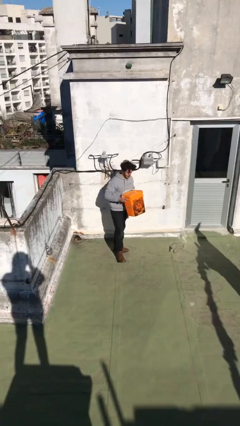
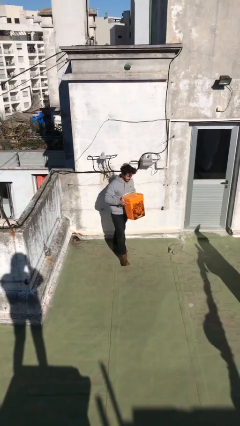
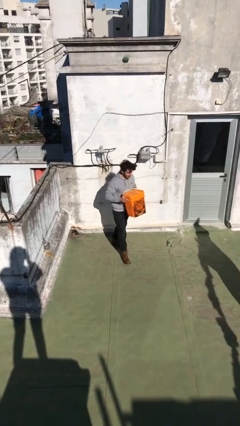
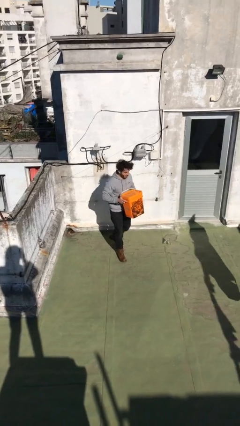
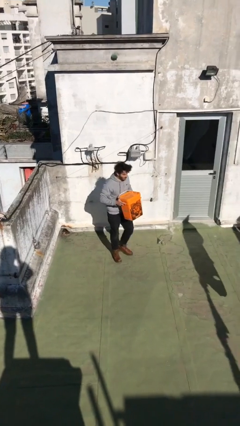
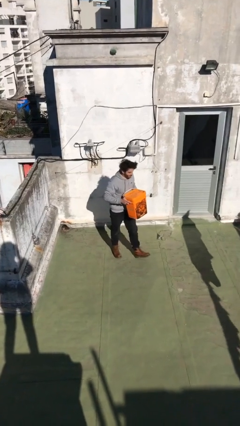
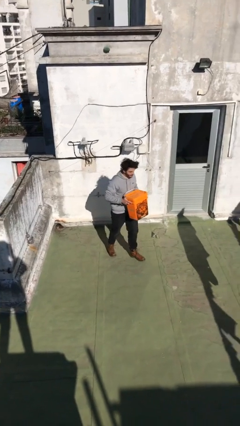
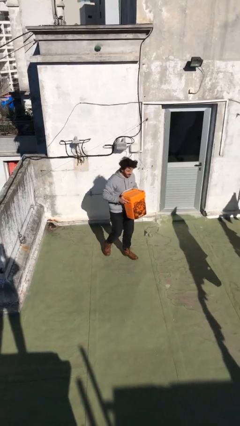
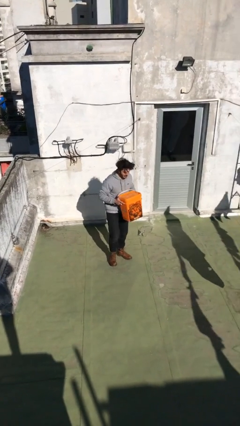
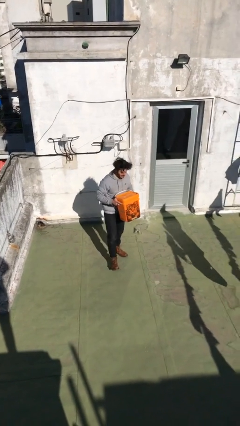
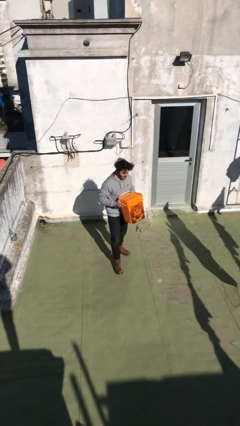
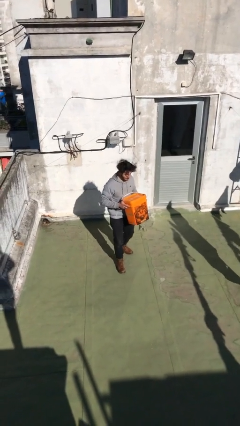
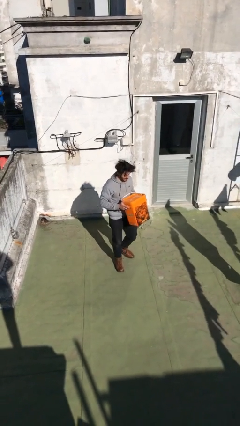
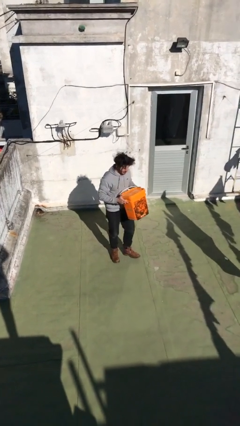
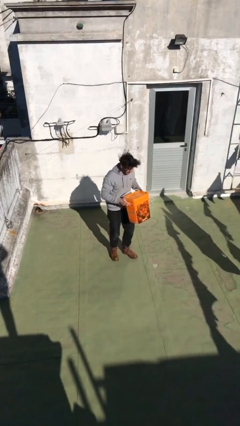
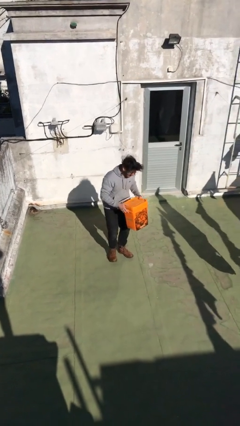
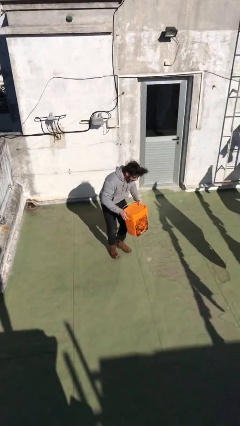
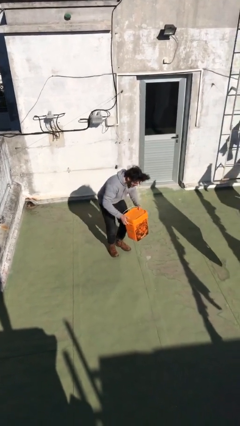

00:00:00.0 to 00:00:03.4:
person carries heavy object

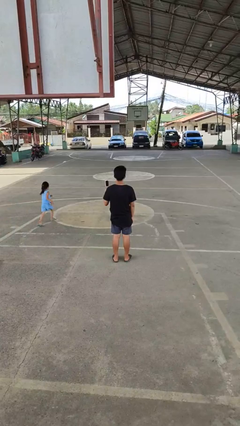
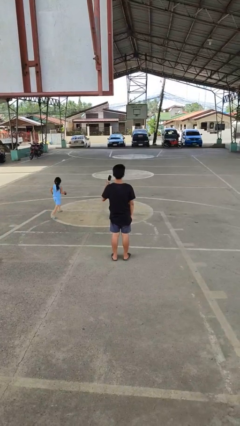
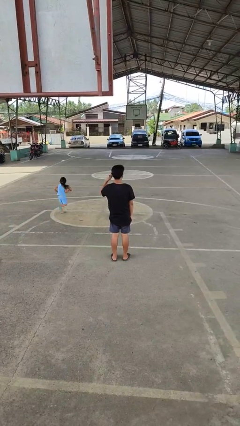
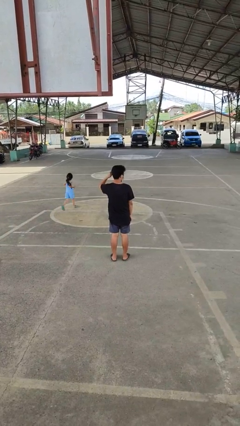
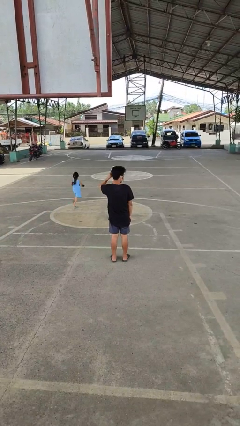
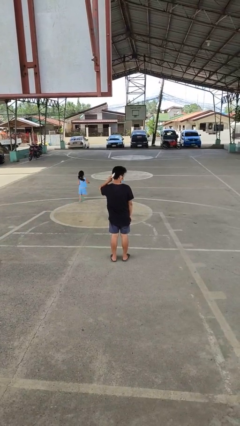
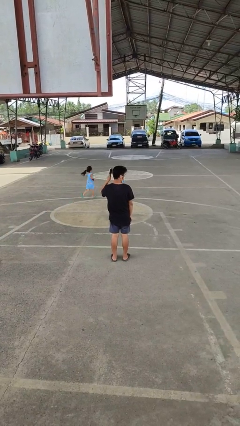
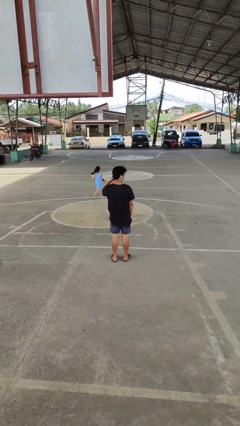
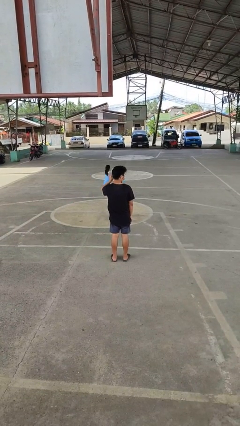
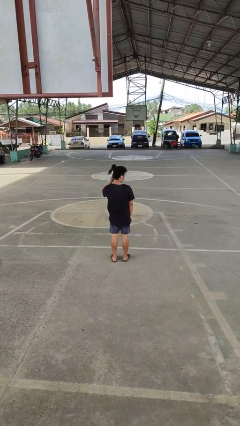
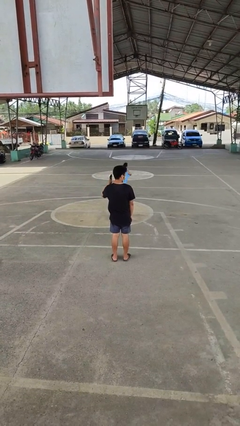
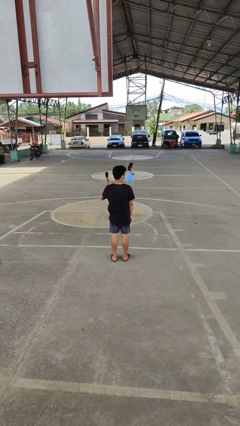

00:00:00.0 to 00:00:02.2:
person brushes hair

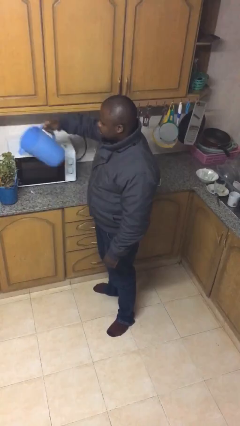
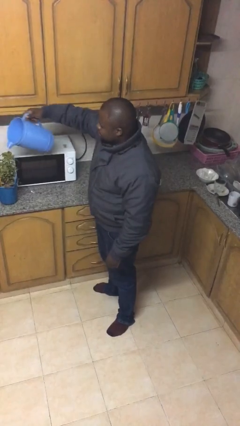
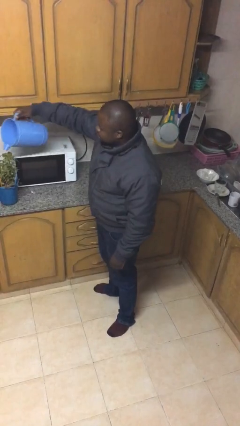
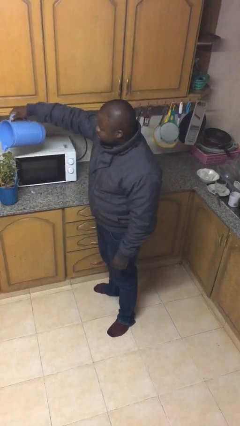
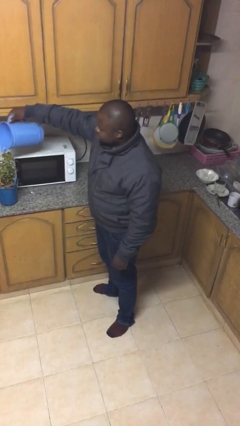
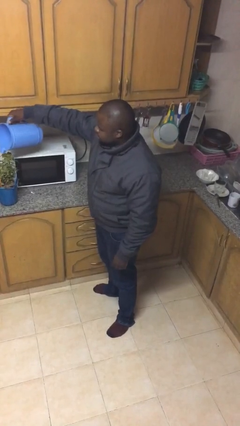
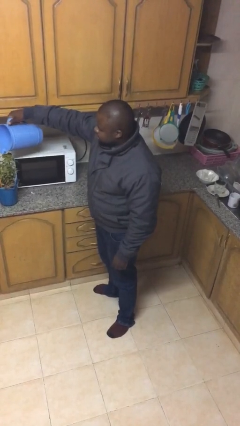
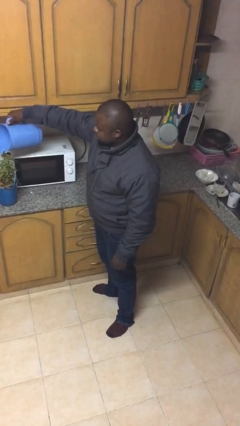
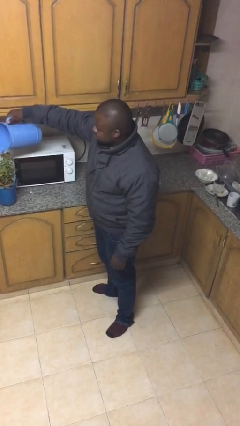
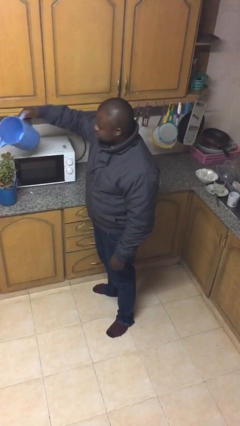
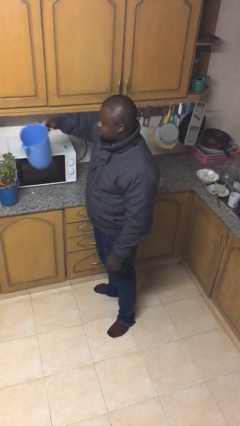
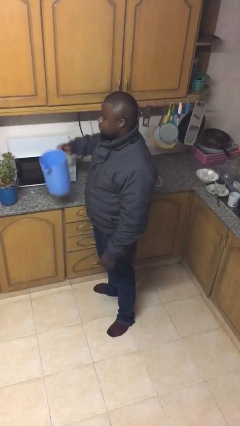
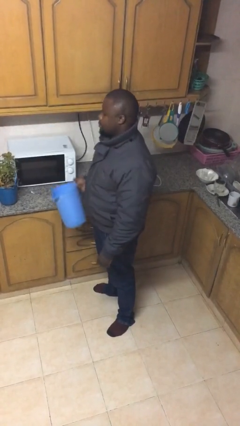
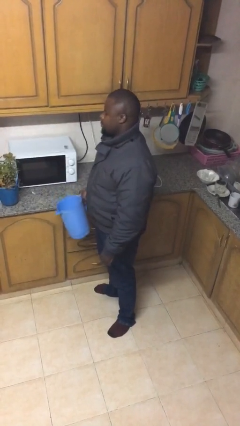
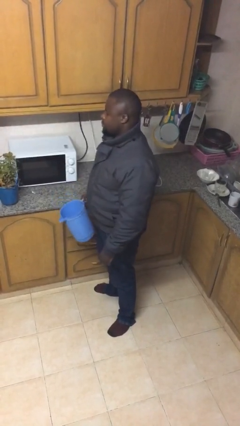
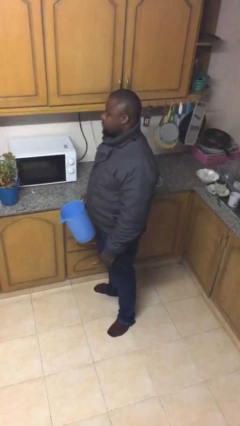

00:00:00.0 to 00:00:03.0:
person waters houseplant

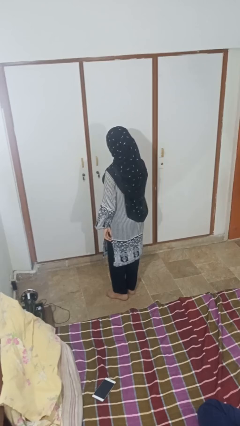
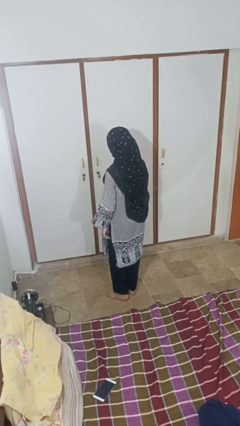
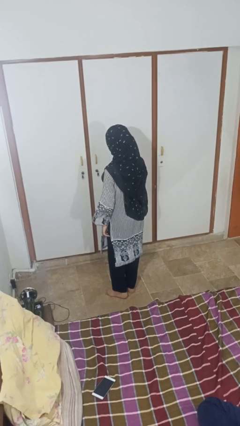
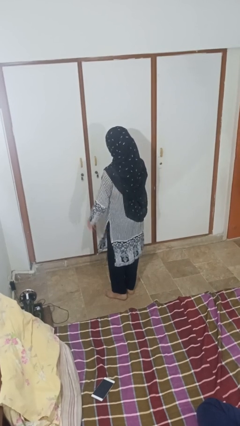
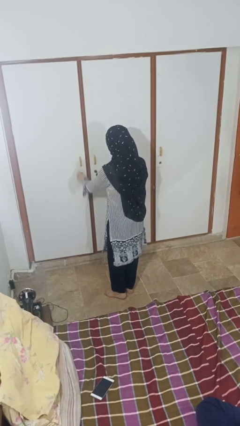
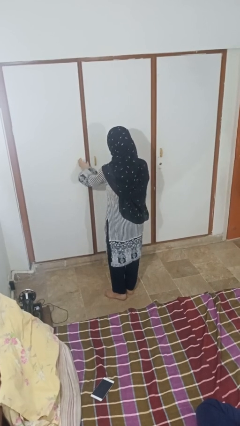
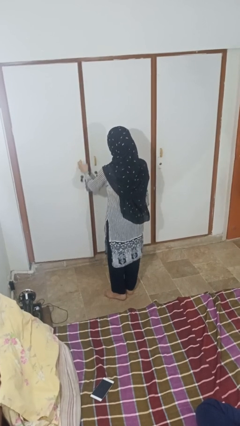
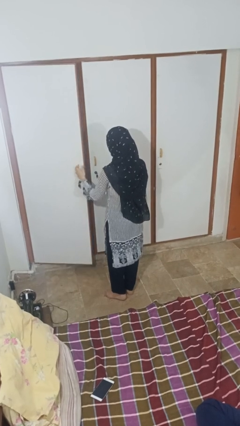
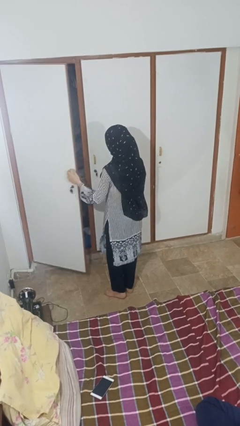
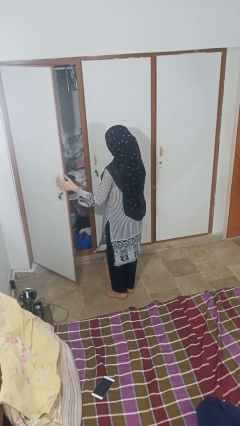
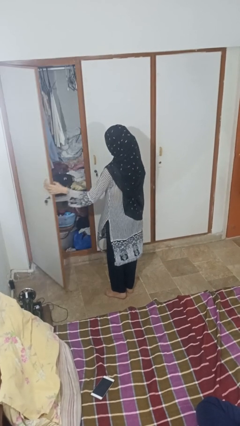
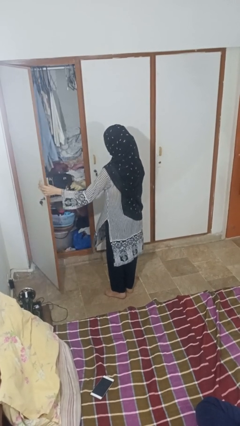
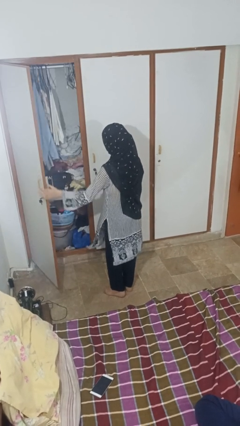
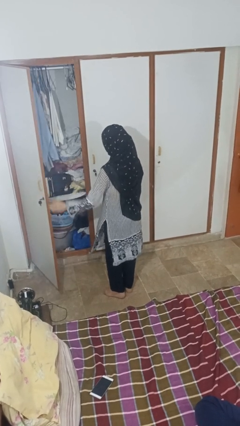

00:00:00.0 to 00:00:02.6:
person opens closet door

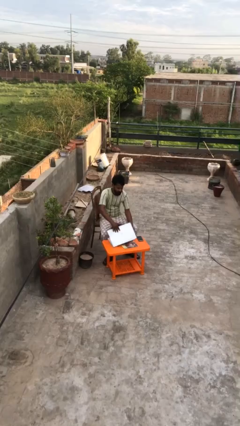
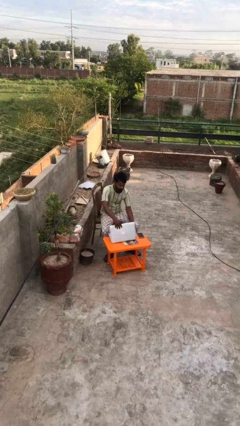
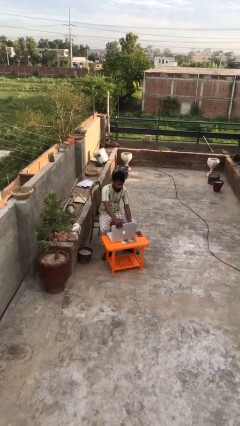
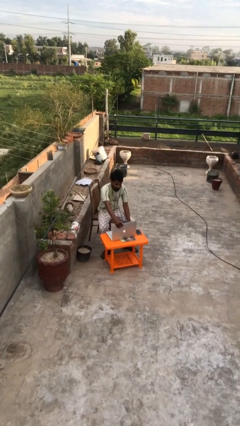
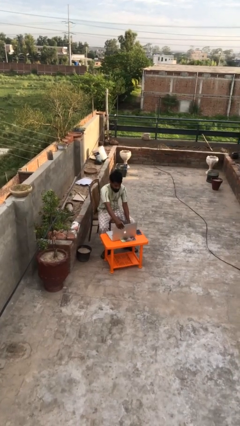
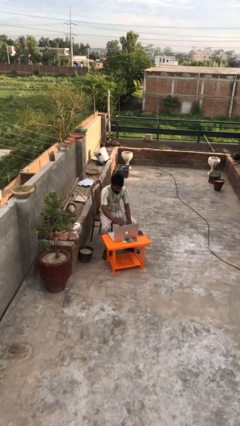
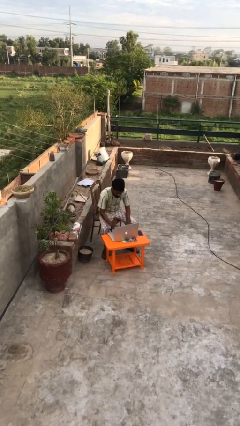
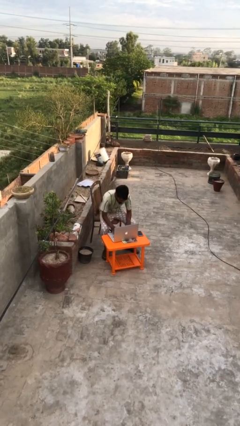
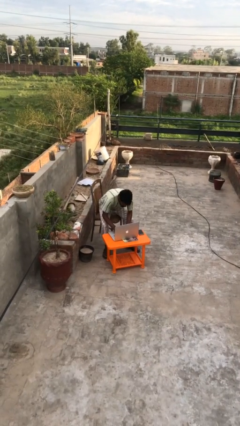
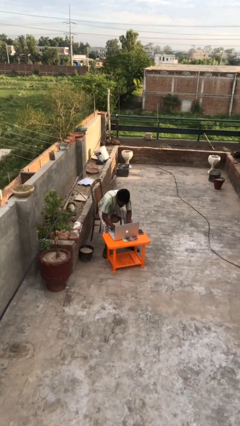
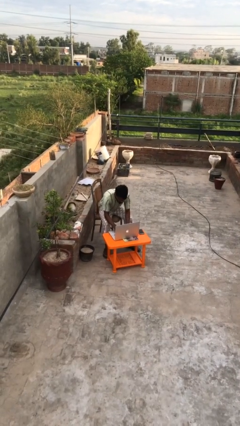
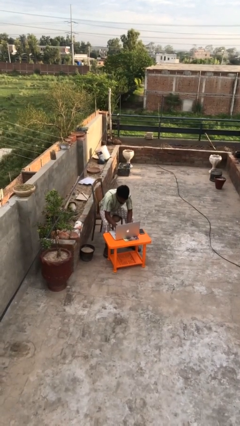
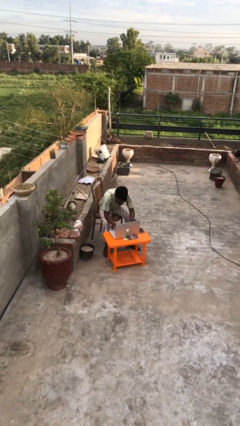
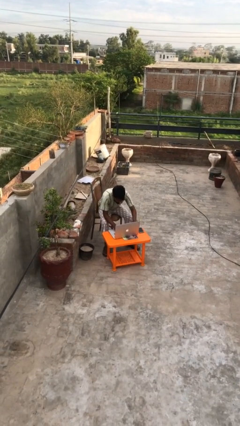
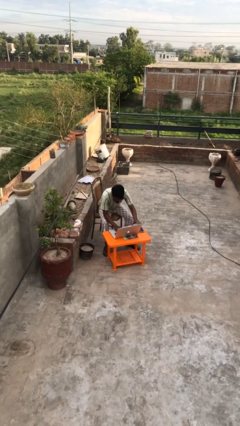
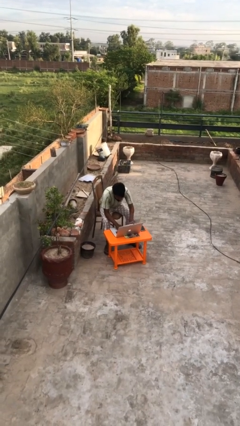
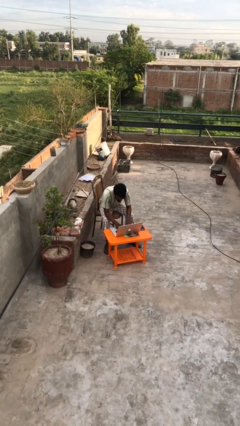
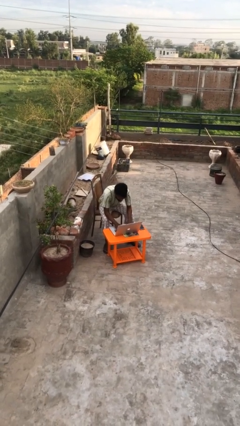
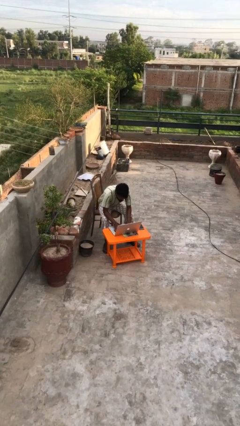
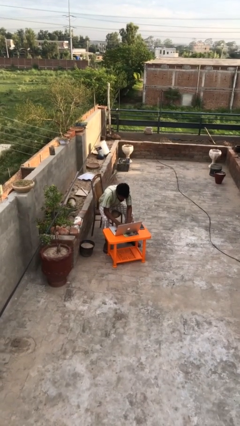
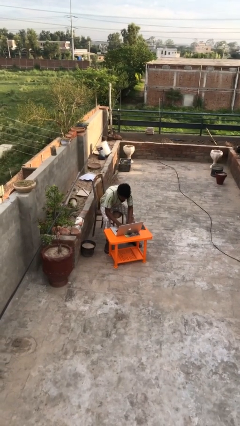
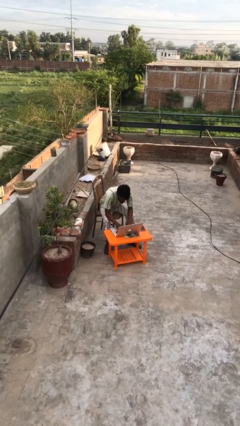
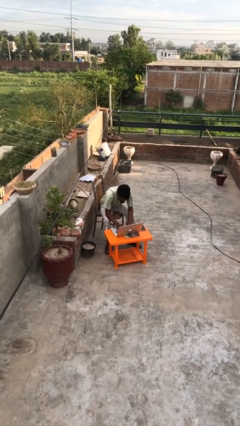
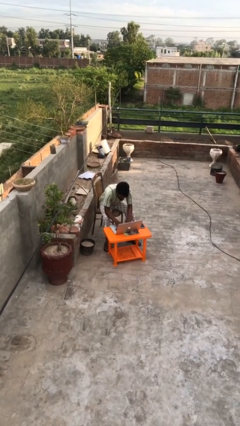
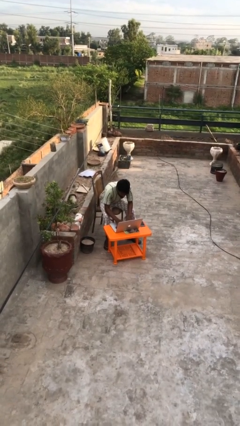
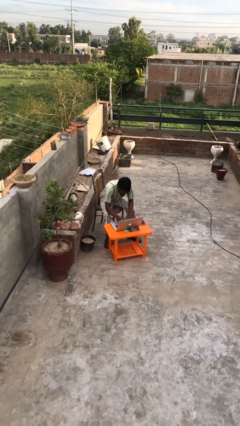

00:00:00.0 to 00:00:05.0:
person interacts with laptop

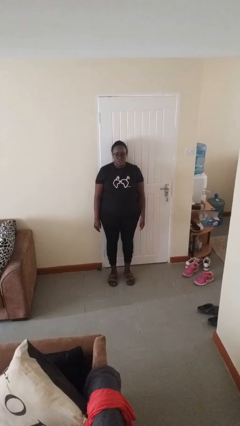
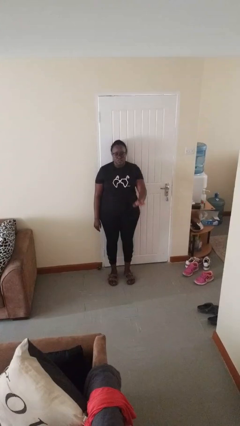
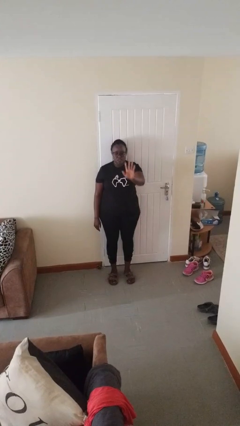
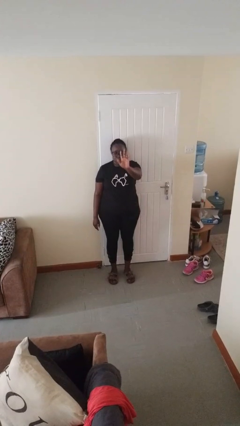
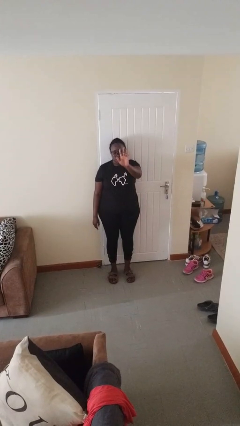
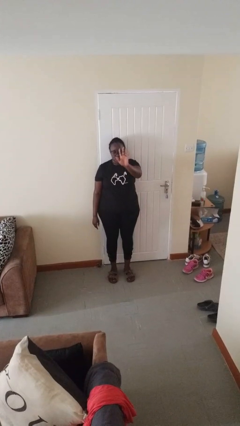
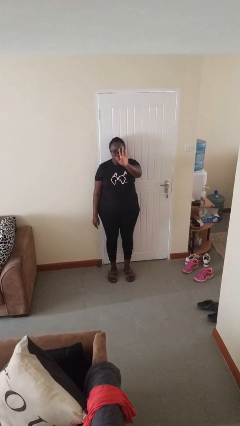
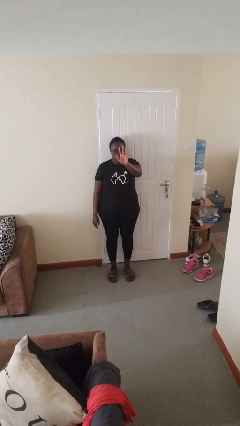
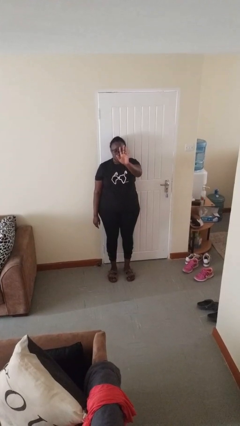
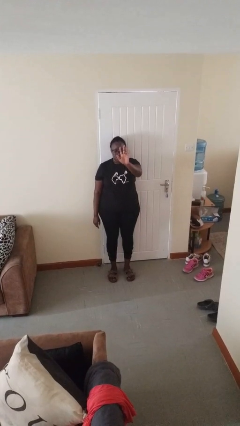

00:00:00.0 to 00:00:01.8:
person gestures number five
